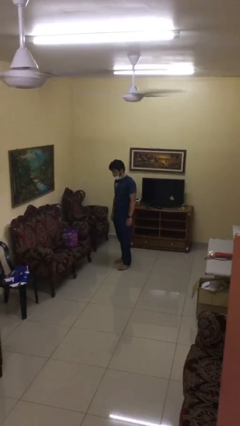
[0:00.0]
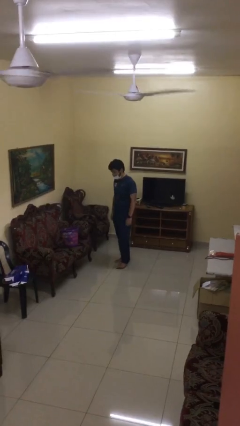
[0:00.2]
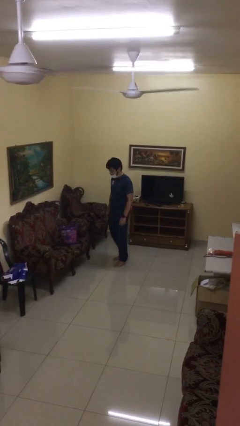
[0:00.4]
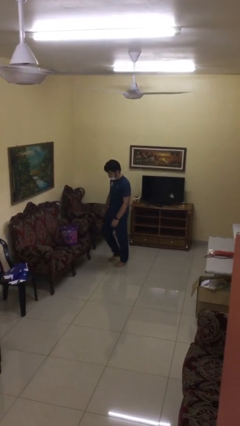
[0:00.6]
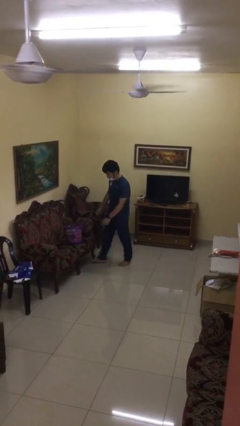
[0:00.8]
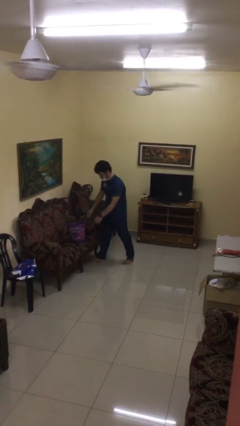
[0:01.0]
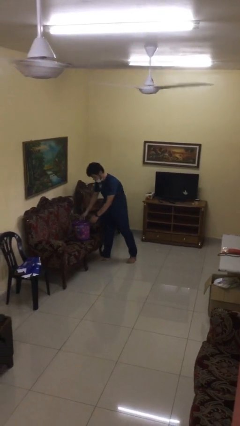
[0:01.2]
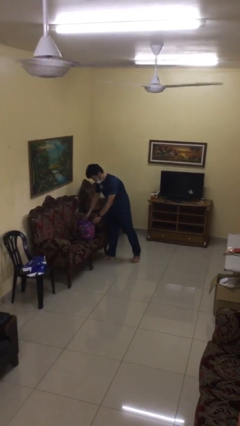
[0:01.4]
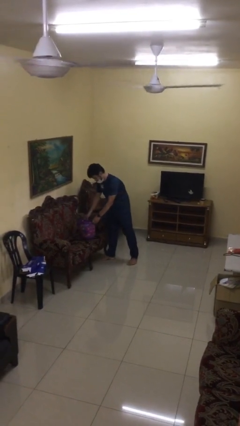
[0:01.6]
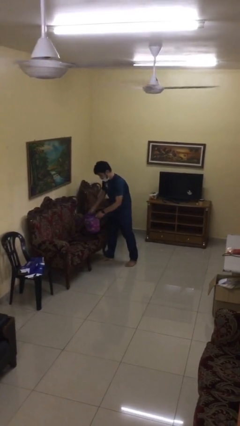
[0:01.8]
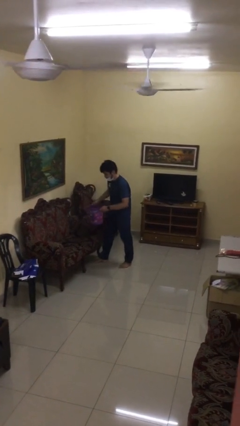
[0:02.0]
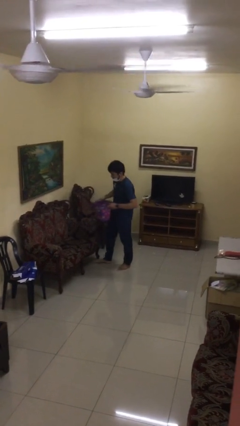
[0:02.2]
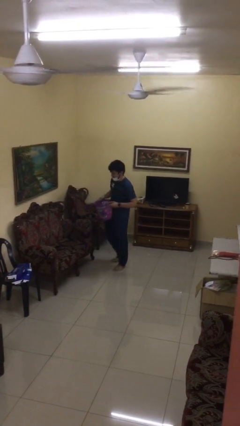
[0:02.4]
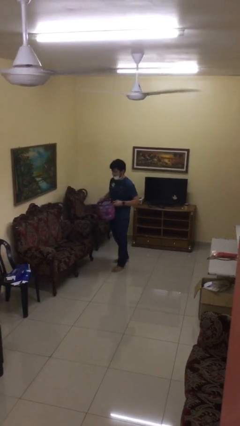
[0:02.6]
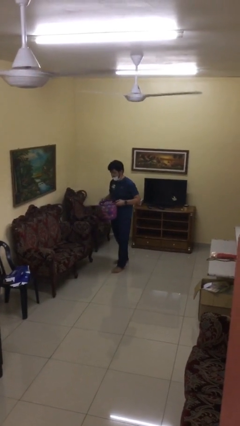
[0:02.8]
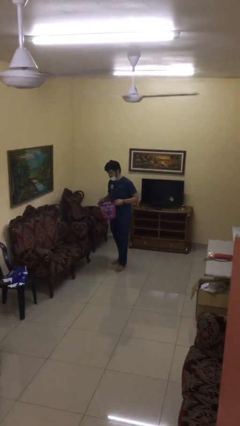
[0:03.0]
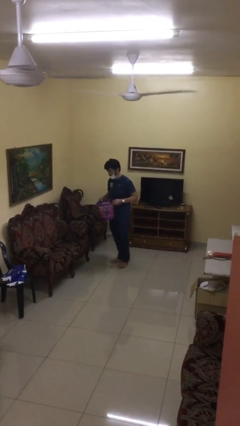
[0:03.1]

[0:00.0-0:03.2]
person picks up object from couch

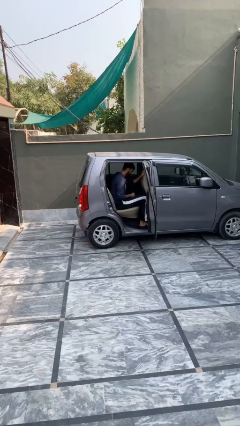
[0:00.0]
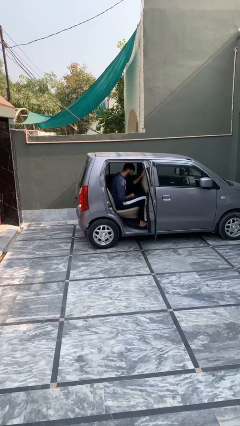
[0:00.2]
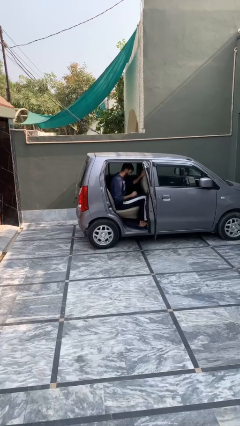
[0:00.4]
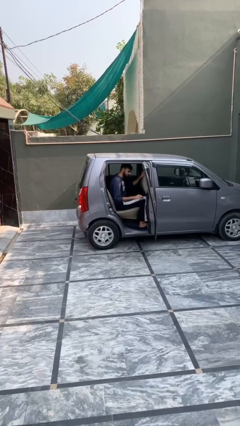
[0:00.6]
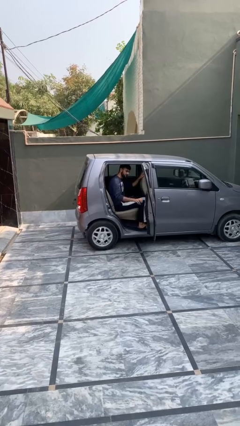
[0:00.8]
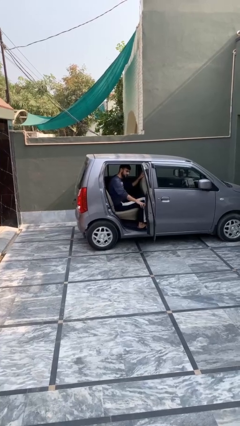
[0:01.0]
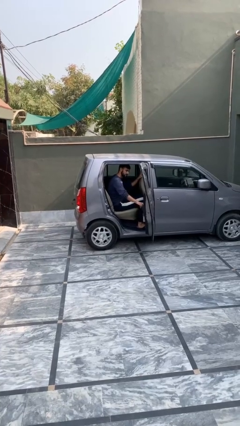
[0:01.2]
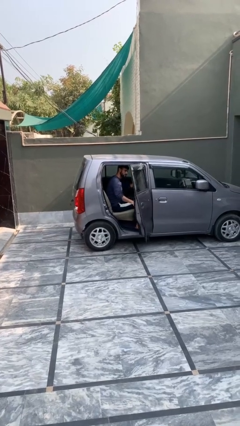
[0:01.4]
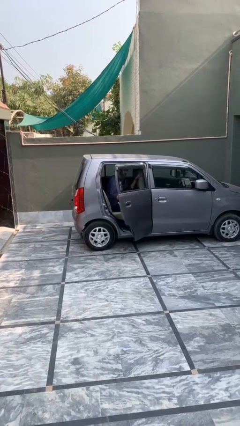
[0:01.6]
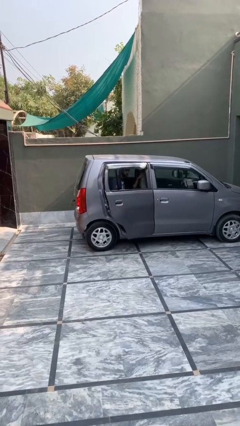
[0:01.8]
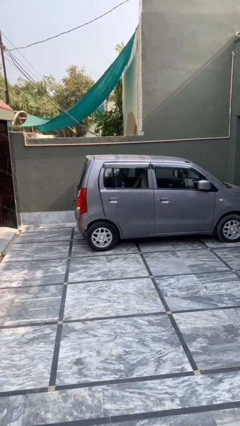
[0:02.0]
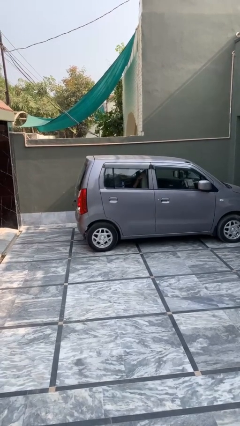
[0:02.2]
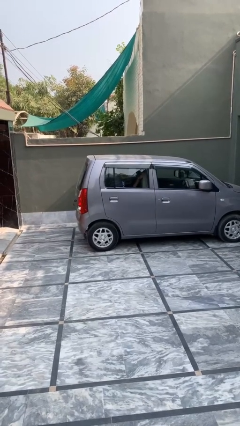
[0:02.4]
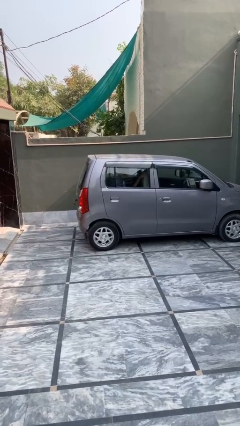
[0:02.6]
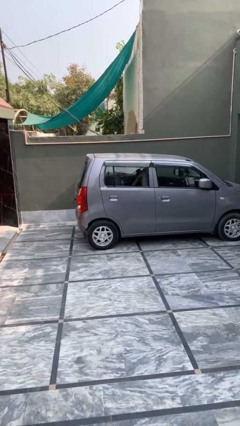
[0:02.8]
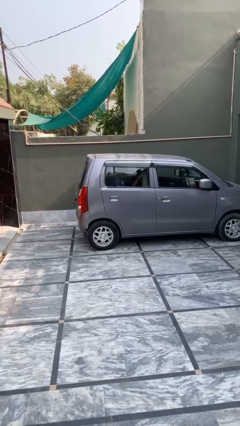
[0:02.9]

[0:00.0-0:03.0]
person closes car door

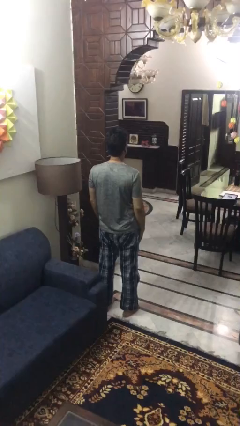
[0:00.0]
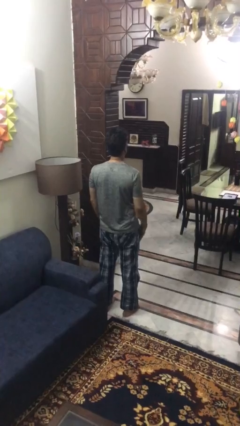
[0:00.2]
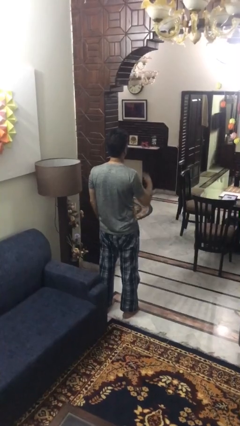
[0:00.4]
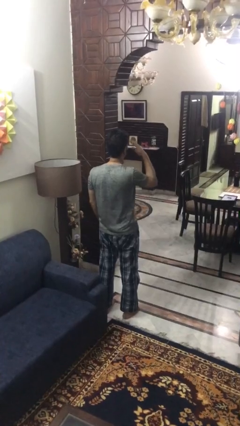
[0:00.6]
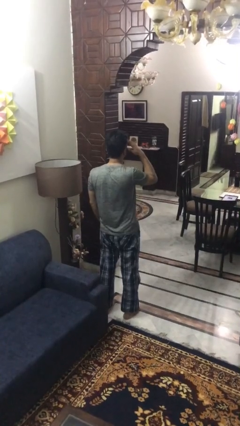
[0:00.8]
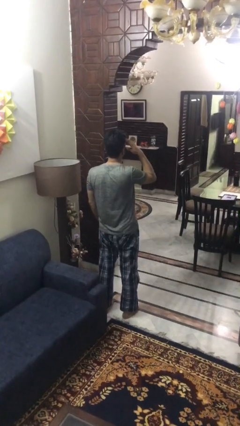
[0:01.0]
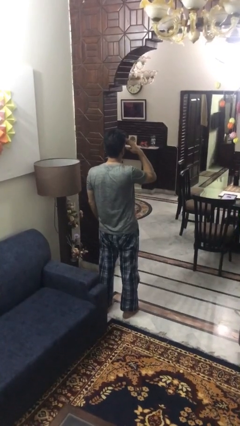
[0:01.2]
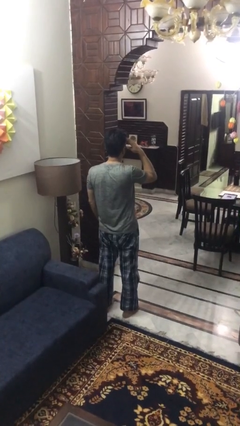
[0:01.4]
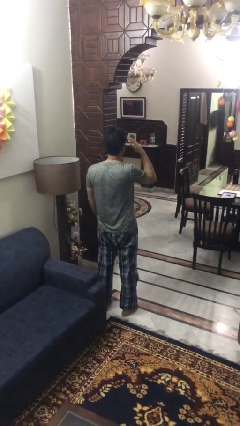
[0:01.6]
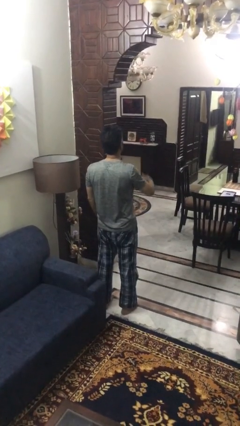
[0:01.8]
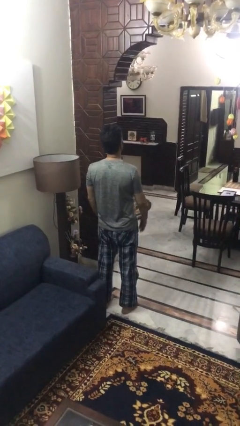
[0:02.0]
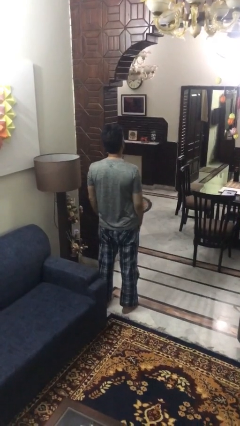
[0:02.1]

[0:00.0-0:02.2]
person salutes

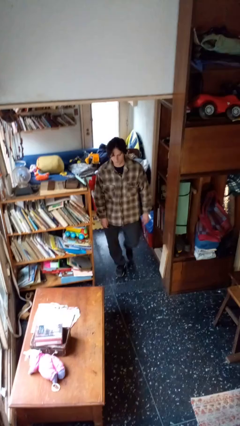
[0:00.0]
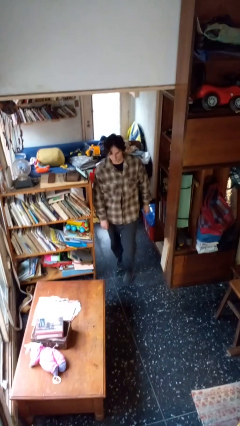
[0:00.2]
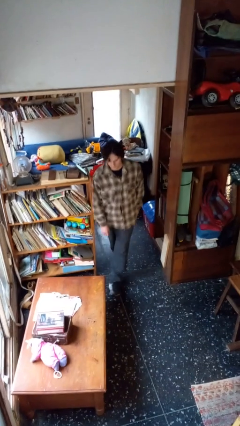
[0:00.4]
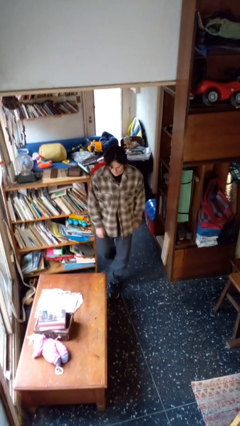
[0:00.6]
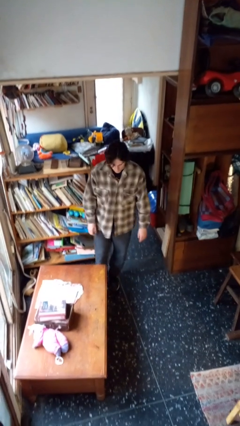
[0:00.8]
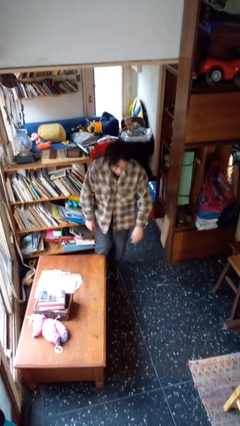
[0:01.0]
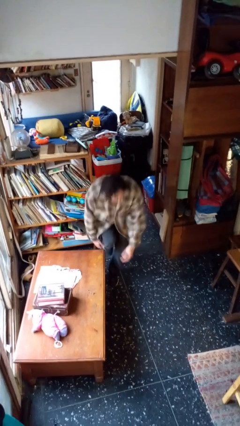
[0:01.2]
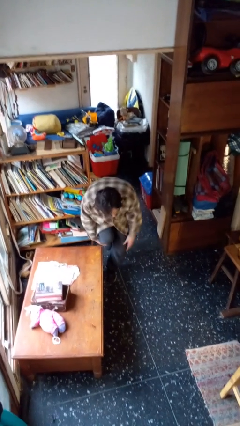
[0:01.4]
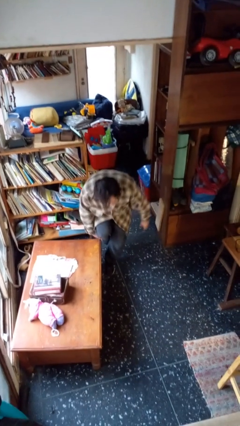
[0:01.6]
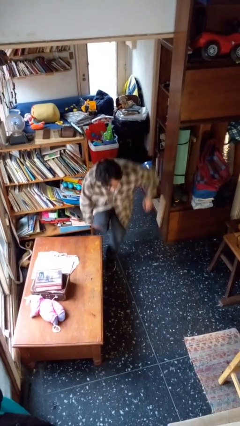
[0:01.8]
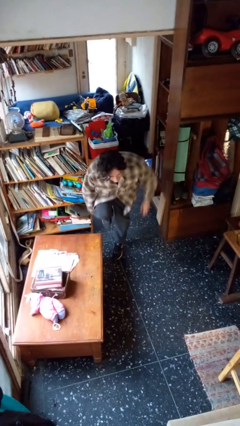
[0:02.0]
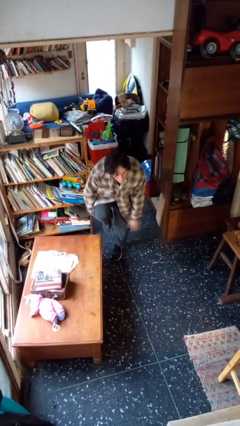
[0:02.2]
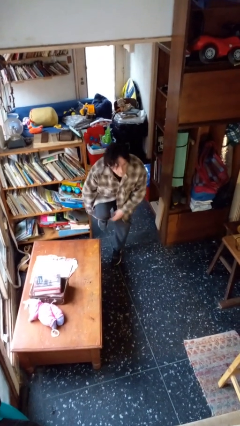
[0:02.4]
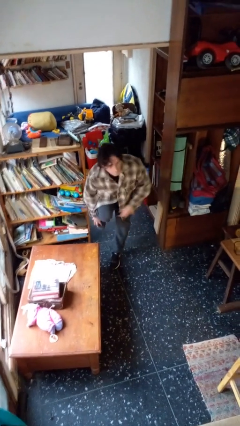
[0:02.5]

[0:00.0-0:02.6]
person bumps into table

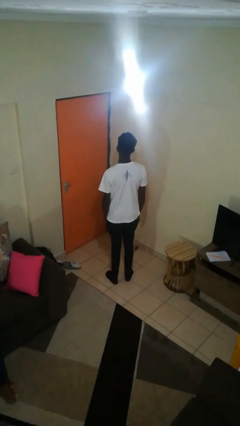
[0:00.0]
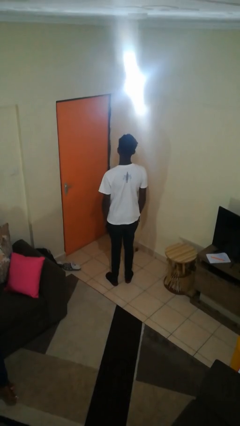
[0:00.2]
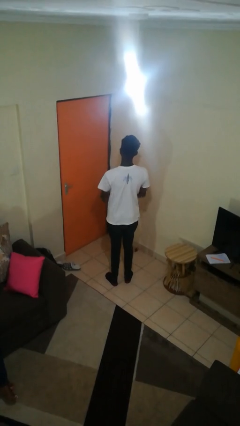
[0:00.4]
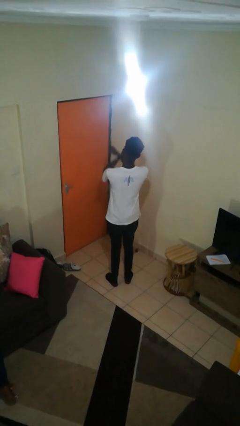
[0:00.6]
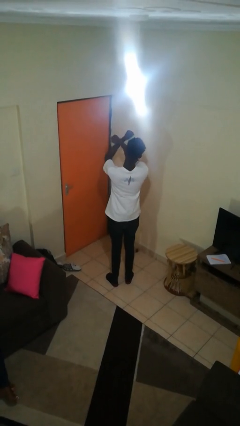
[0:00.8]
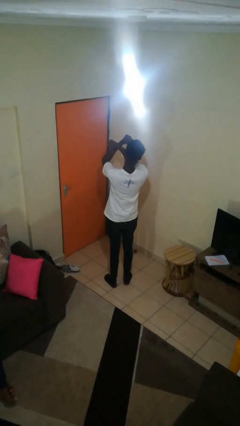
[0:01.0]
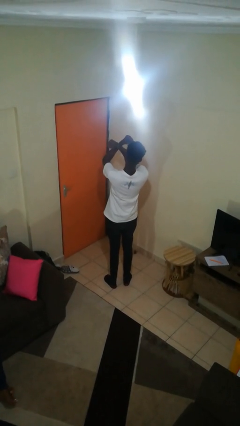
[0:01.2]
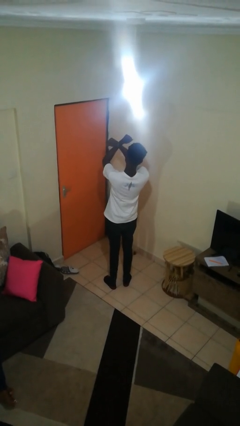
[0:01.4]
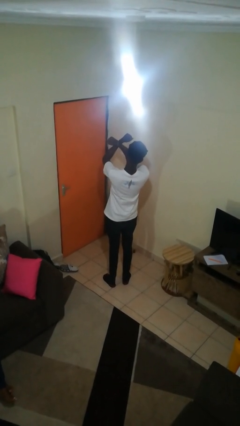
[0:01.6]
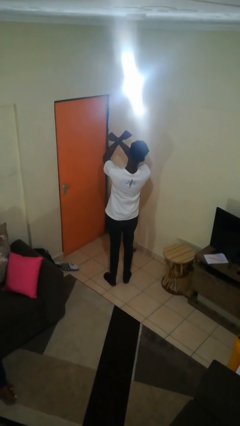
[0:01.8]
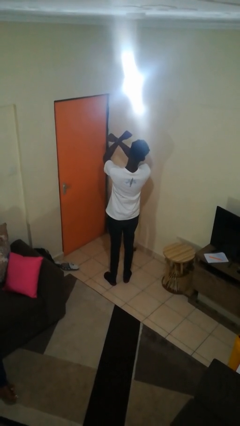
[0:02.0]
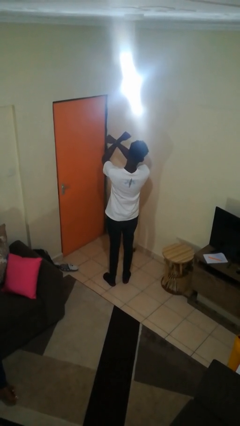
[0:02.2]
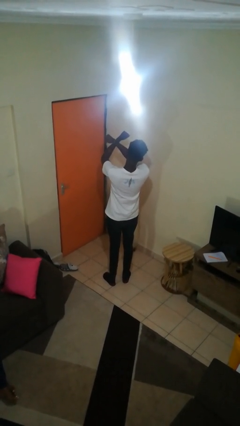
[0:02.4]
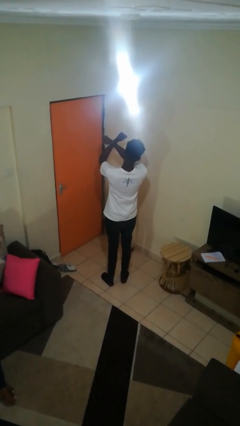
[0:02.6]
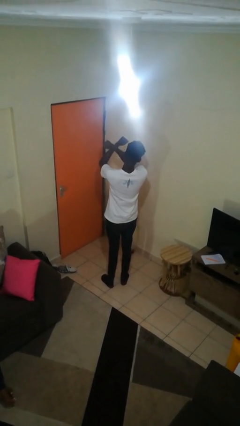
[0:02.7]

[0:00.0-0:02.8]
person gestures arms x

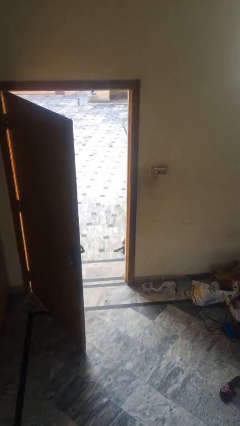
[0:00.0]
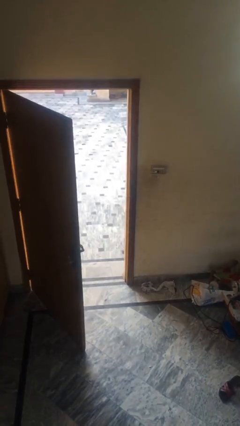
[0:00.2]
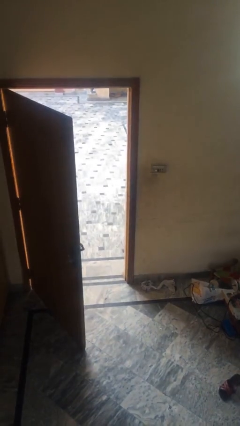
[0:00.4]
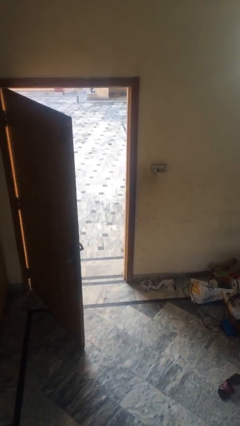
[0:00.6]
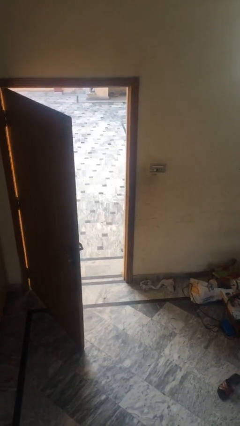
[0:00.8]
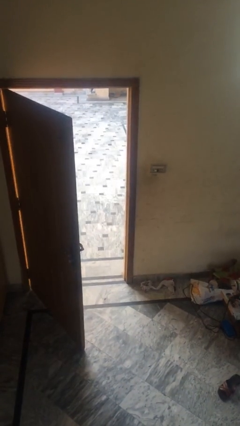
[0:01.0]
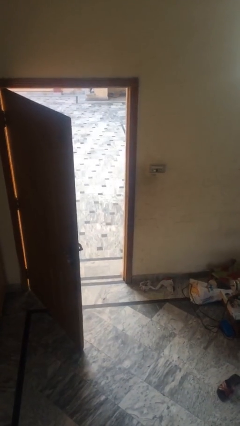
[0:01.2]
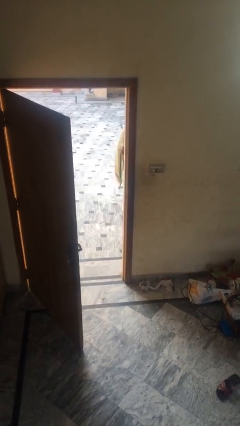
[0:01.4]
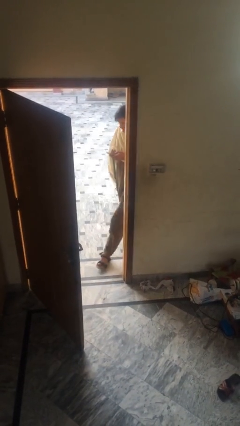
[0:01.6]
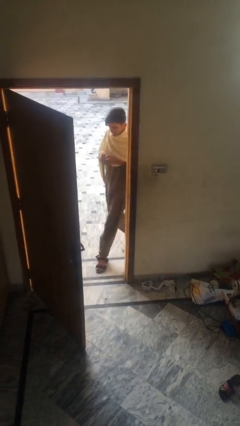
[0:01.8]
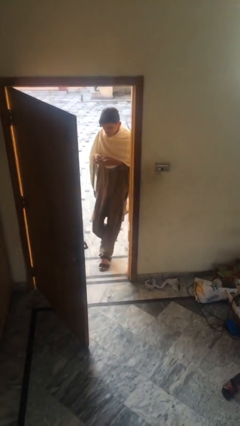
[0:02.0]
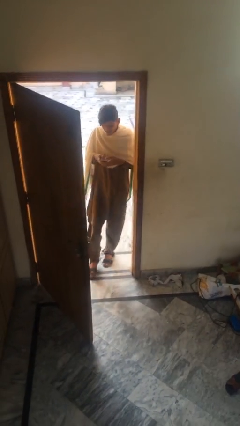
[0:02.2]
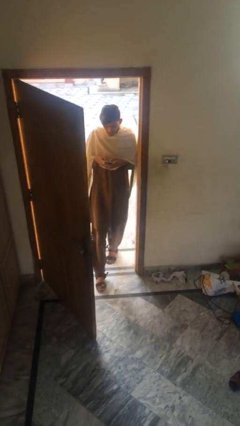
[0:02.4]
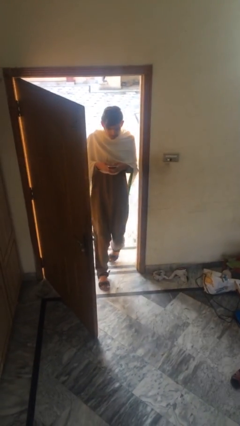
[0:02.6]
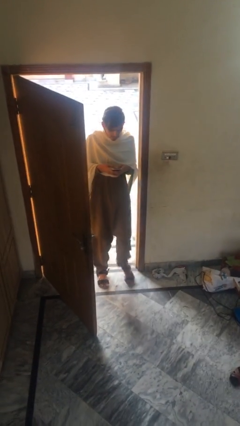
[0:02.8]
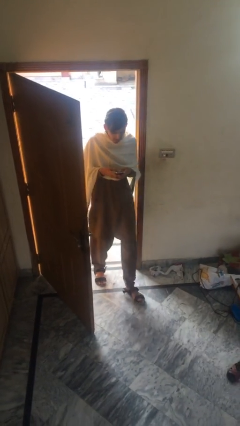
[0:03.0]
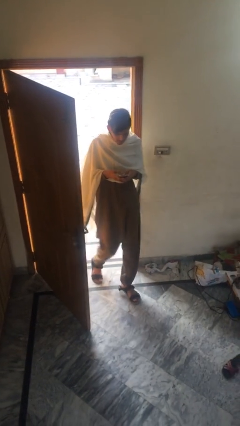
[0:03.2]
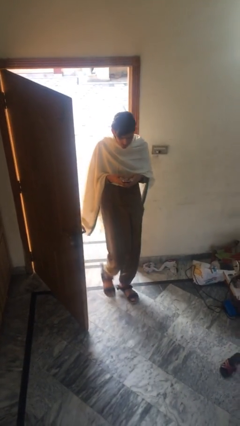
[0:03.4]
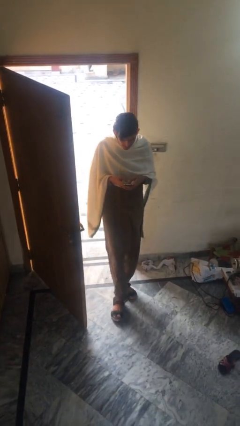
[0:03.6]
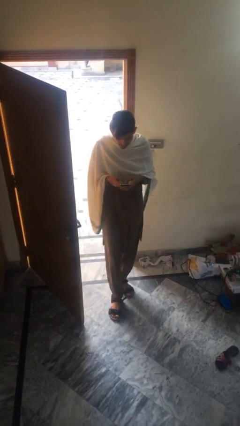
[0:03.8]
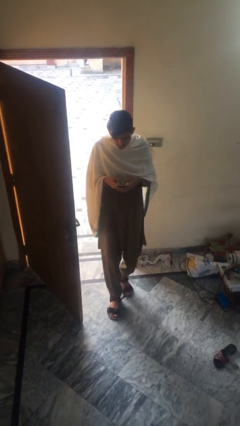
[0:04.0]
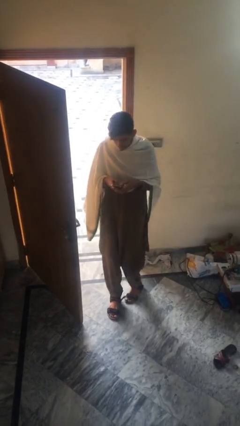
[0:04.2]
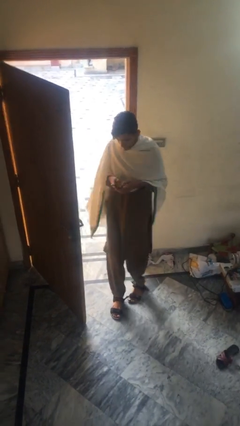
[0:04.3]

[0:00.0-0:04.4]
person enters scene through structure
